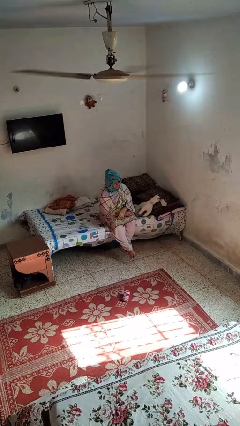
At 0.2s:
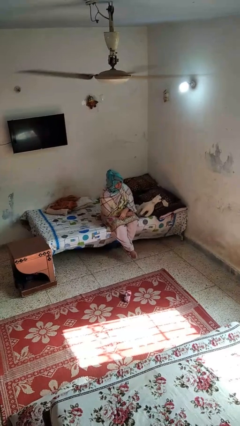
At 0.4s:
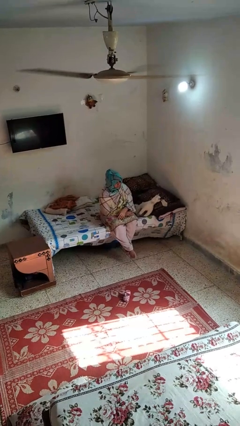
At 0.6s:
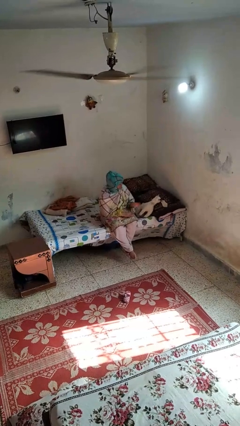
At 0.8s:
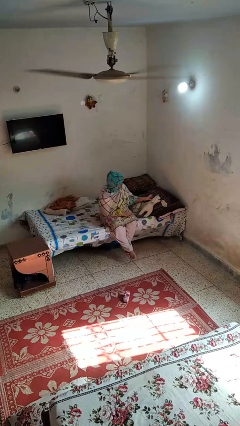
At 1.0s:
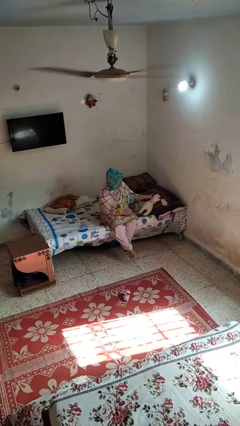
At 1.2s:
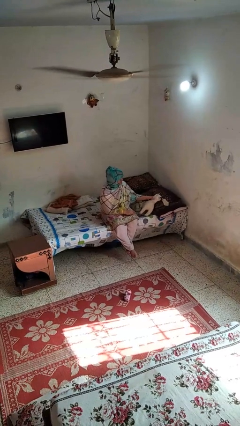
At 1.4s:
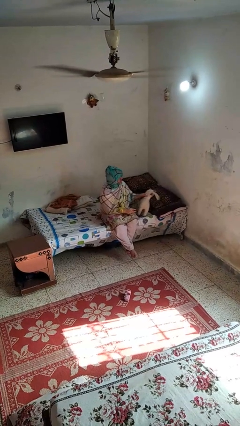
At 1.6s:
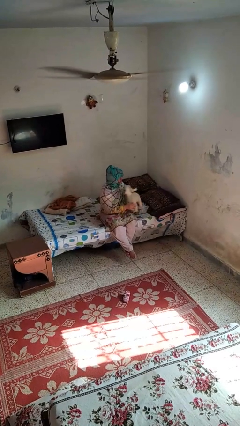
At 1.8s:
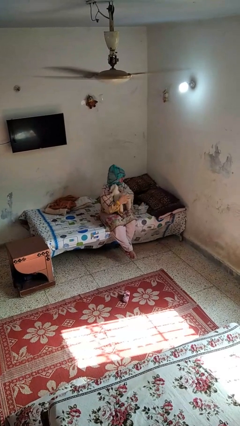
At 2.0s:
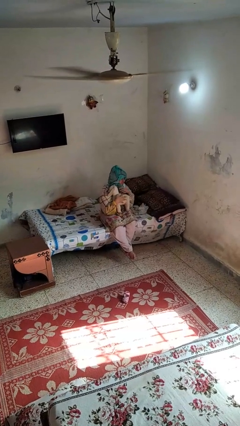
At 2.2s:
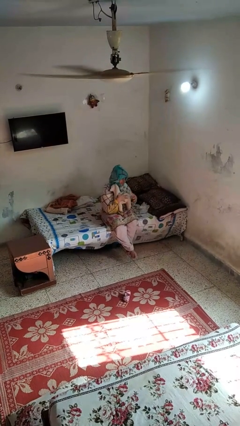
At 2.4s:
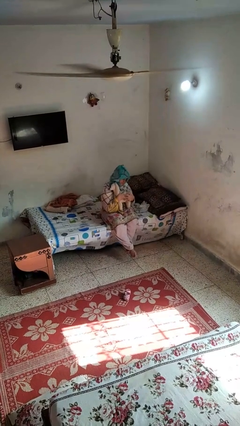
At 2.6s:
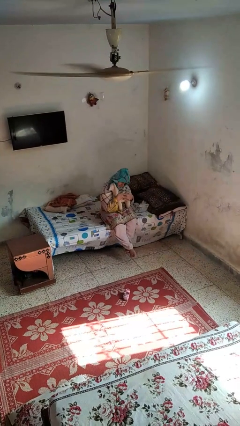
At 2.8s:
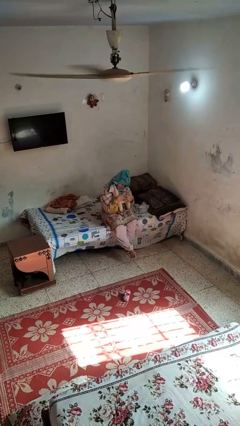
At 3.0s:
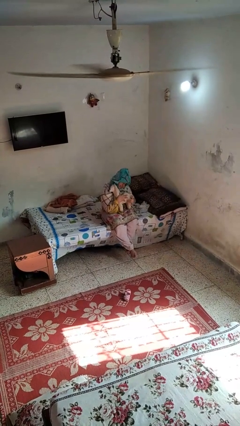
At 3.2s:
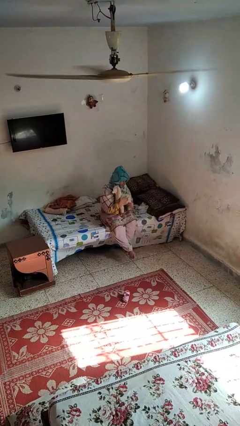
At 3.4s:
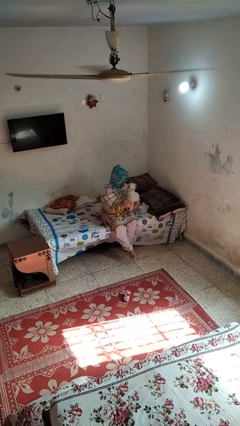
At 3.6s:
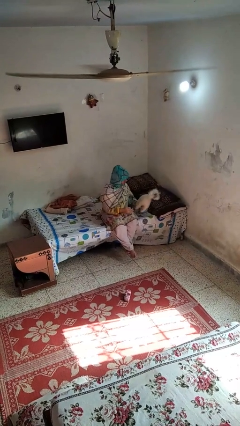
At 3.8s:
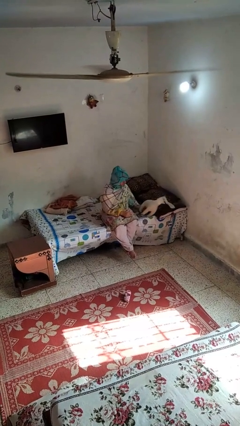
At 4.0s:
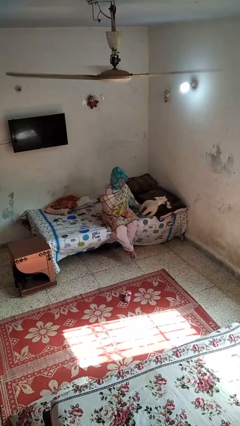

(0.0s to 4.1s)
person hugs stuffed animal

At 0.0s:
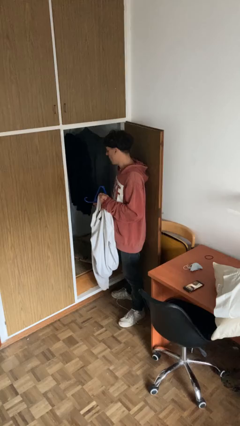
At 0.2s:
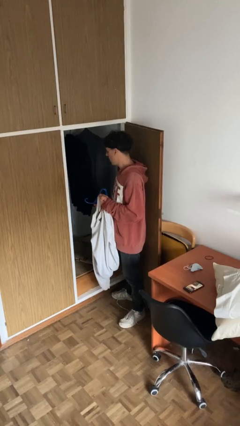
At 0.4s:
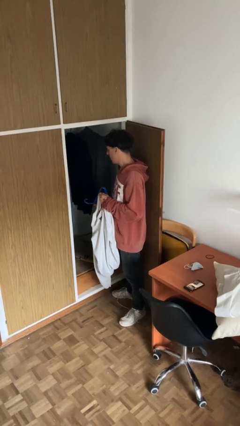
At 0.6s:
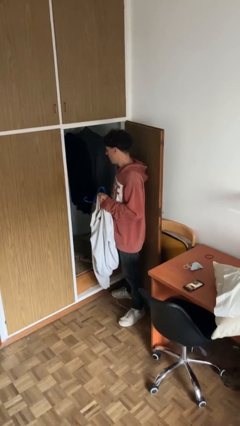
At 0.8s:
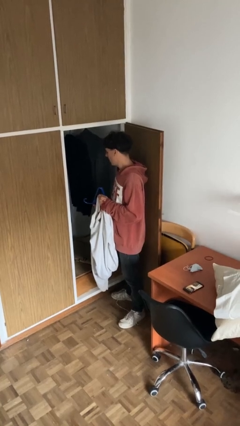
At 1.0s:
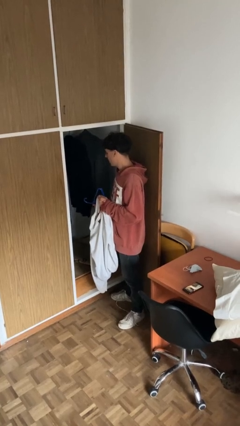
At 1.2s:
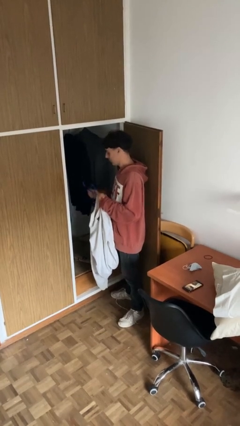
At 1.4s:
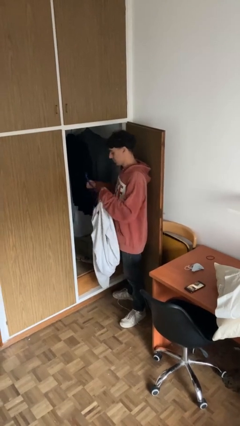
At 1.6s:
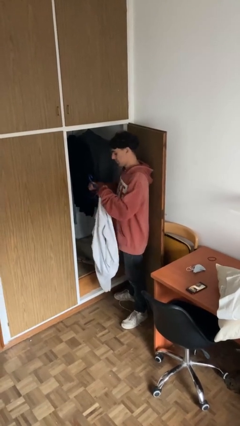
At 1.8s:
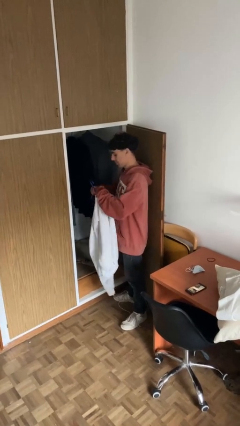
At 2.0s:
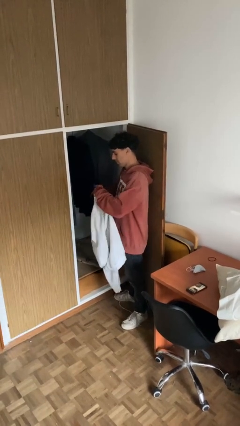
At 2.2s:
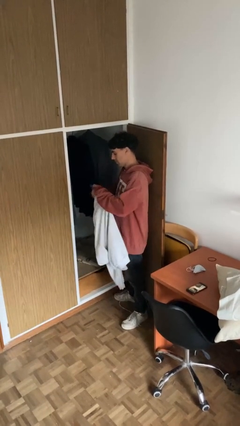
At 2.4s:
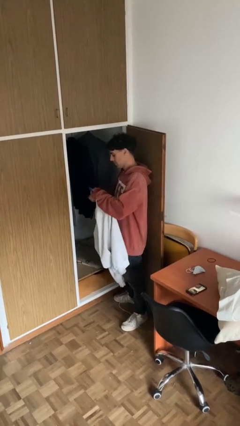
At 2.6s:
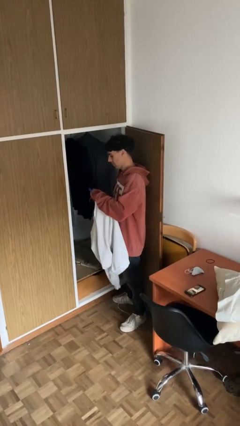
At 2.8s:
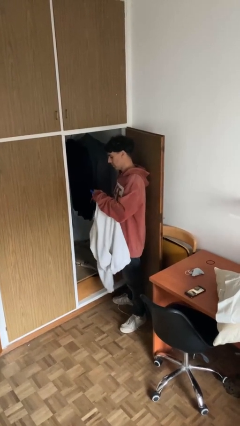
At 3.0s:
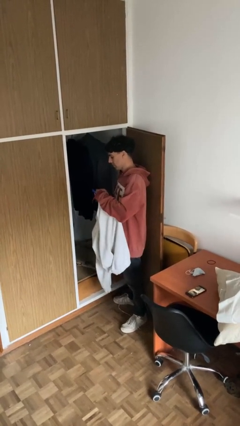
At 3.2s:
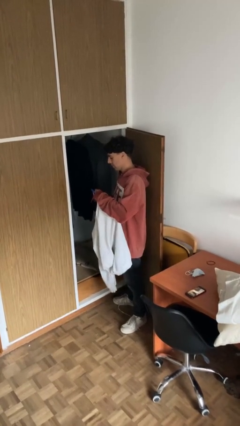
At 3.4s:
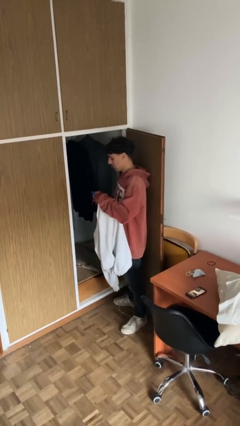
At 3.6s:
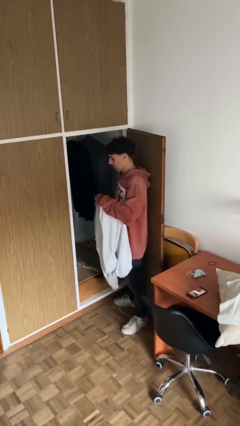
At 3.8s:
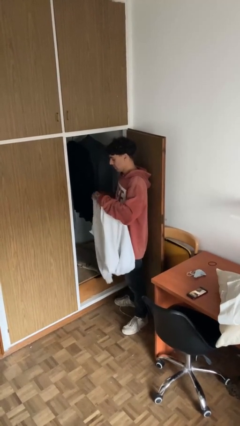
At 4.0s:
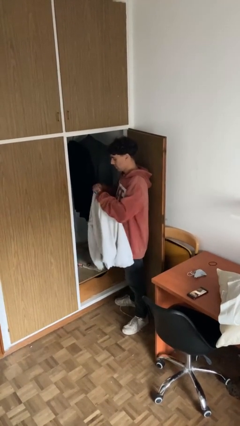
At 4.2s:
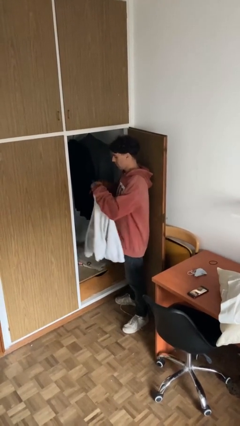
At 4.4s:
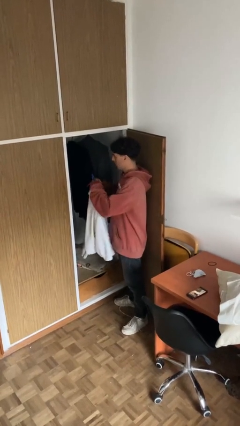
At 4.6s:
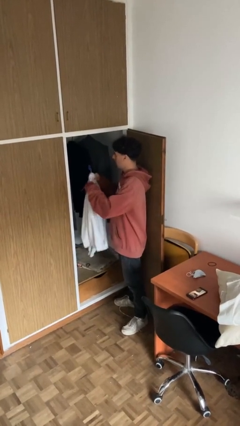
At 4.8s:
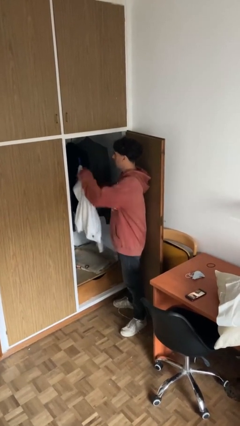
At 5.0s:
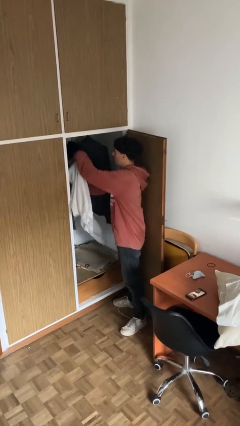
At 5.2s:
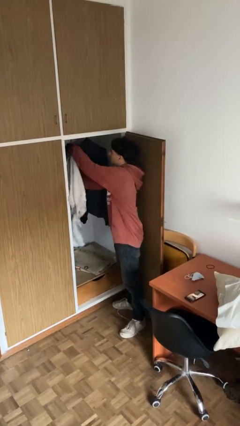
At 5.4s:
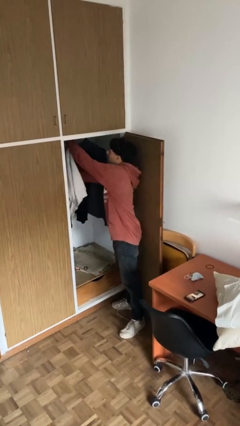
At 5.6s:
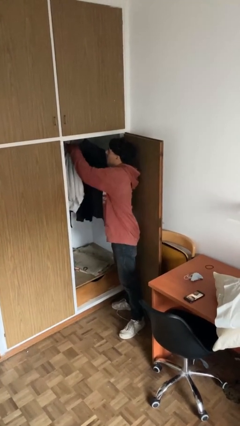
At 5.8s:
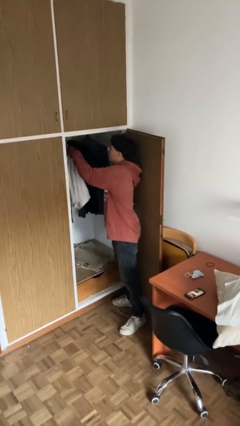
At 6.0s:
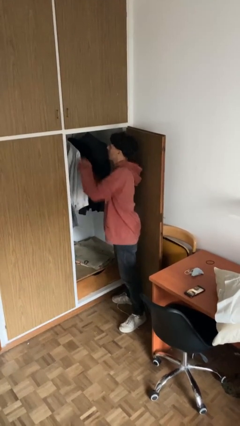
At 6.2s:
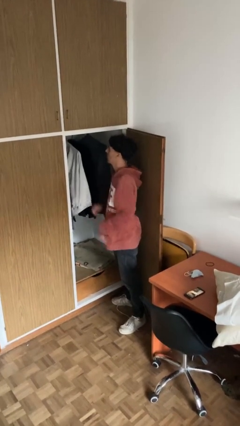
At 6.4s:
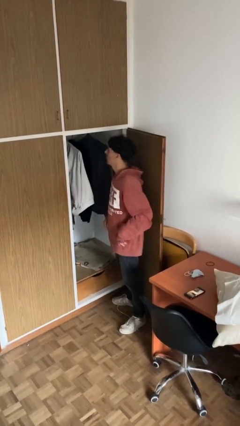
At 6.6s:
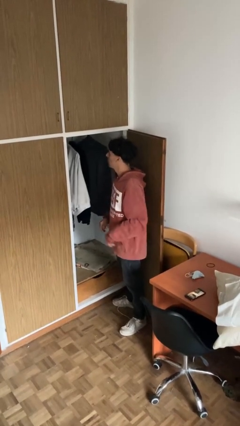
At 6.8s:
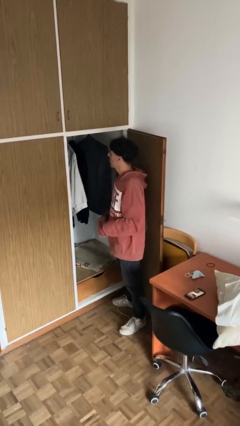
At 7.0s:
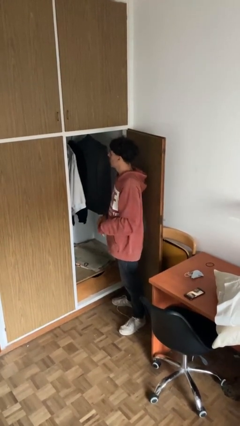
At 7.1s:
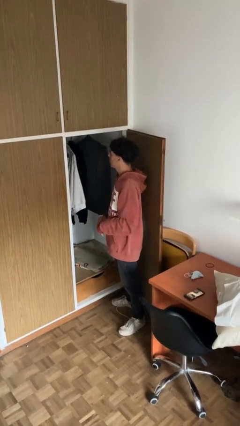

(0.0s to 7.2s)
person puts clothes into closet

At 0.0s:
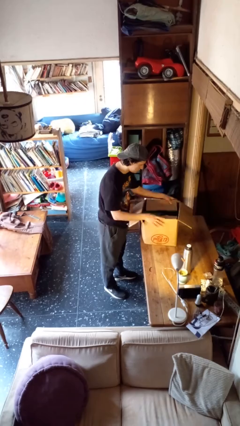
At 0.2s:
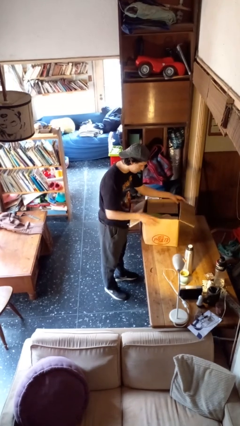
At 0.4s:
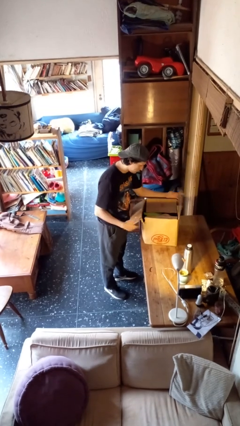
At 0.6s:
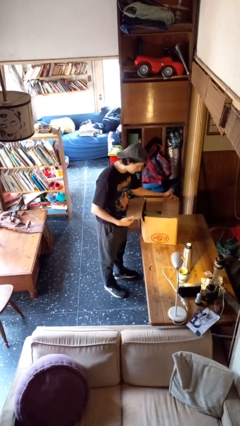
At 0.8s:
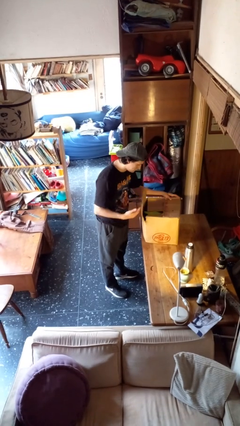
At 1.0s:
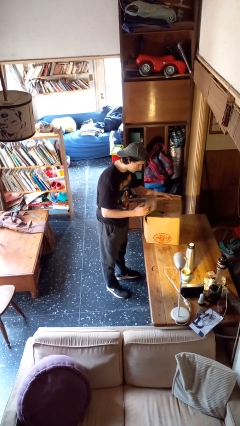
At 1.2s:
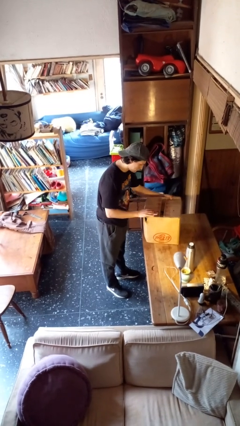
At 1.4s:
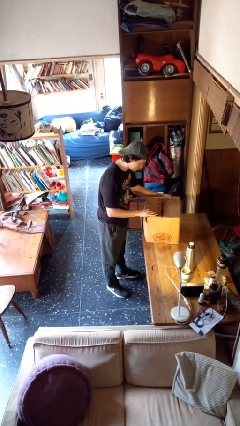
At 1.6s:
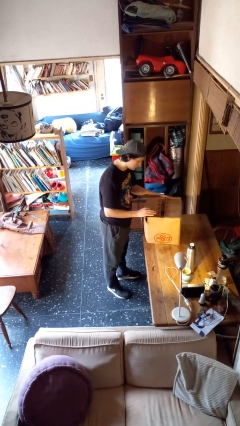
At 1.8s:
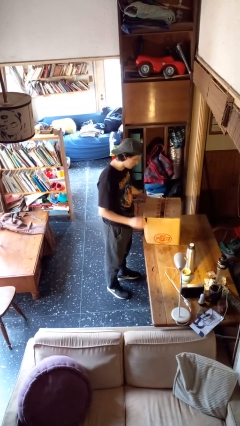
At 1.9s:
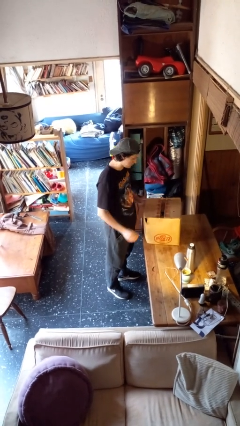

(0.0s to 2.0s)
person closes box

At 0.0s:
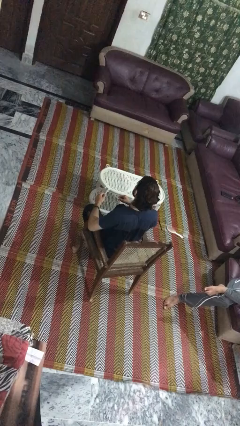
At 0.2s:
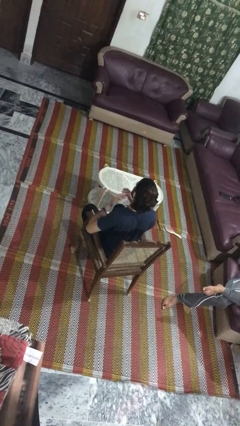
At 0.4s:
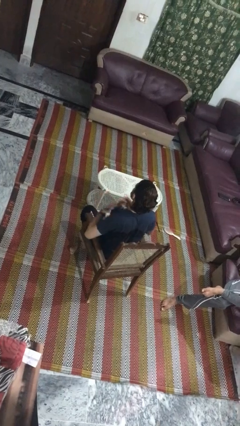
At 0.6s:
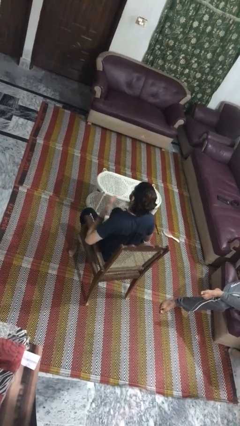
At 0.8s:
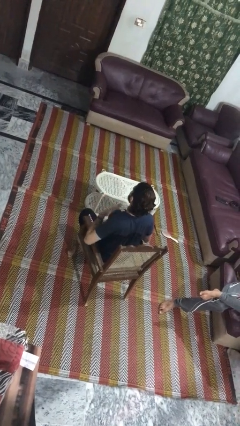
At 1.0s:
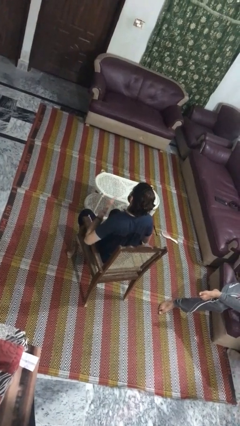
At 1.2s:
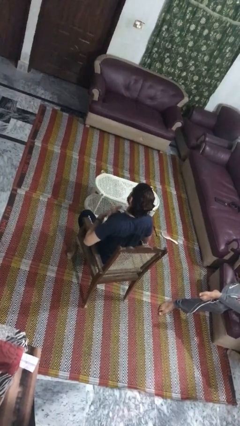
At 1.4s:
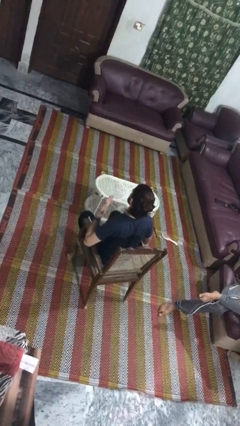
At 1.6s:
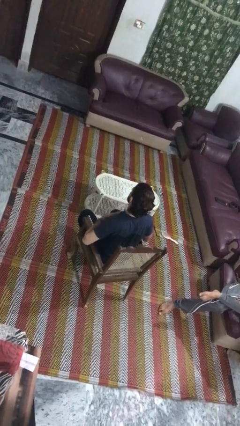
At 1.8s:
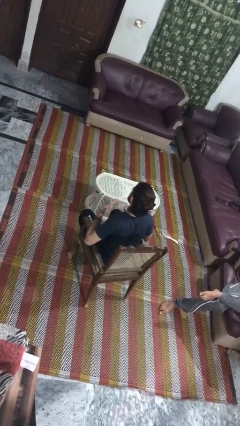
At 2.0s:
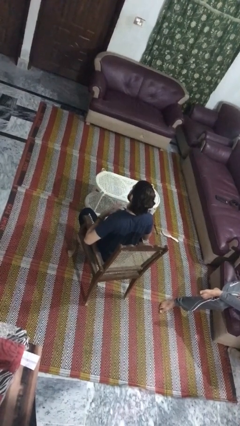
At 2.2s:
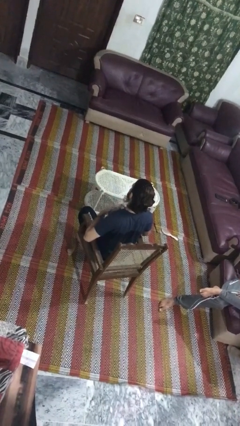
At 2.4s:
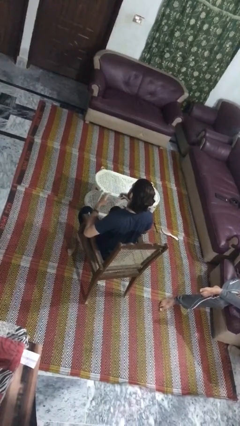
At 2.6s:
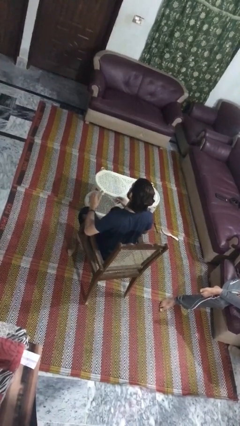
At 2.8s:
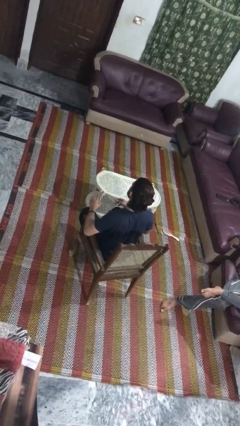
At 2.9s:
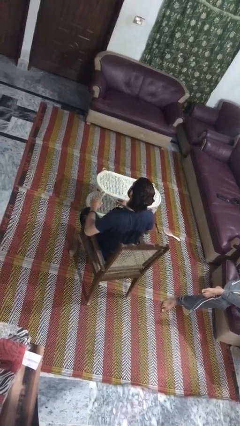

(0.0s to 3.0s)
person drums on chest

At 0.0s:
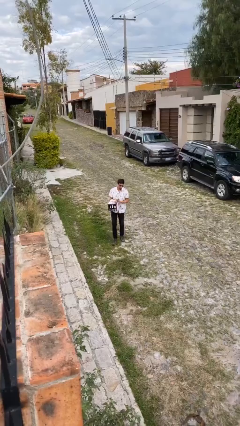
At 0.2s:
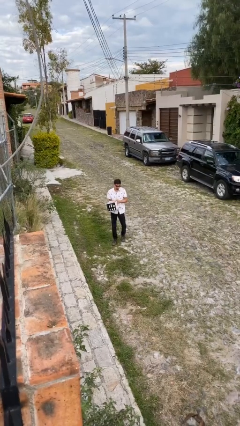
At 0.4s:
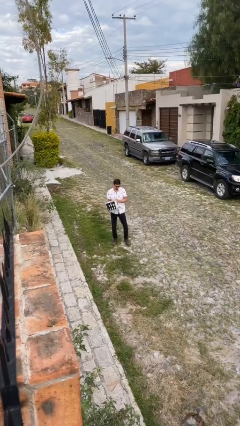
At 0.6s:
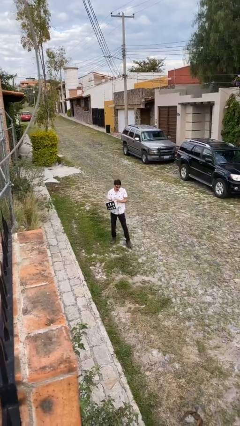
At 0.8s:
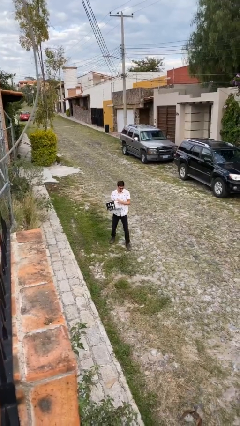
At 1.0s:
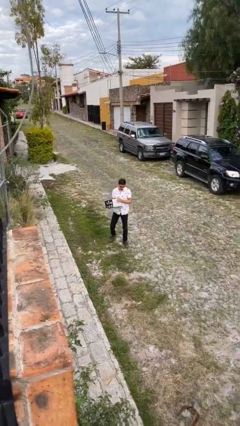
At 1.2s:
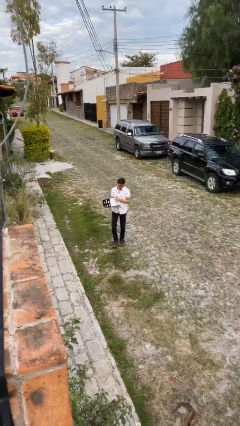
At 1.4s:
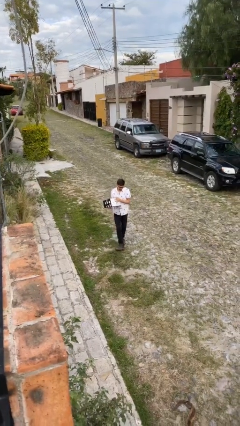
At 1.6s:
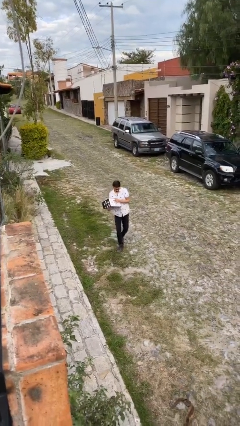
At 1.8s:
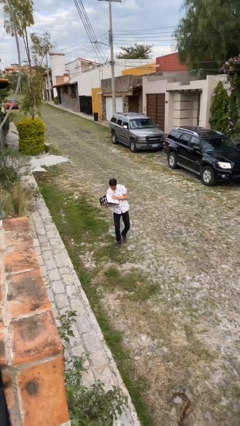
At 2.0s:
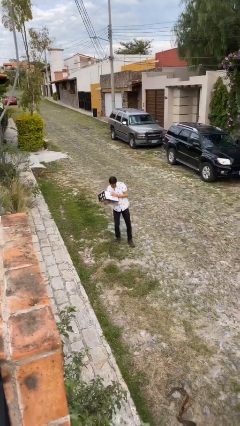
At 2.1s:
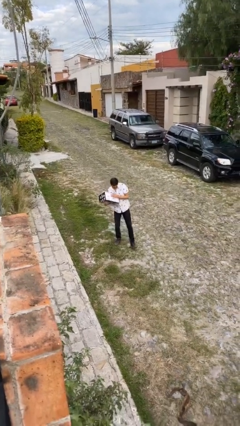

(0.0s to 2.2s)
person carries heavy object
